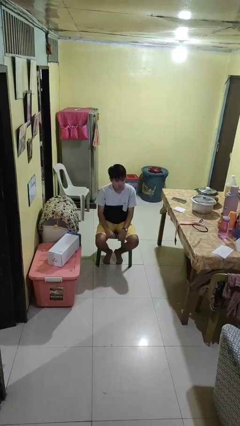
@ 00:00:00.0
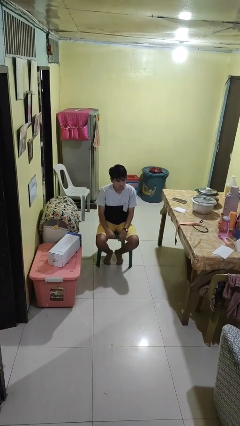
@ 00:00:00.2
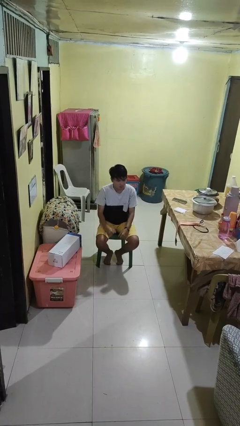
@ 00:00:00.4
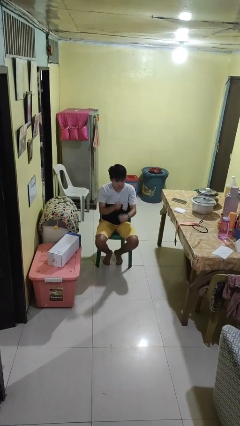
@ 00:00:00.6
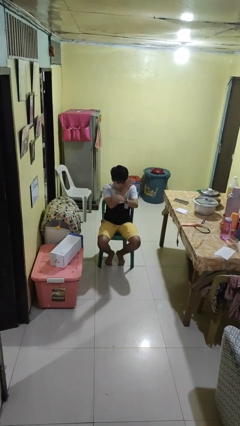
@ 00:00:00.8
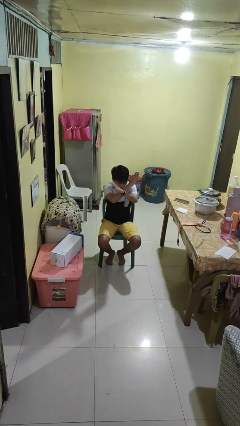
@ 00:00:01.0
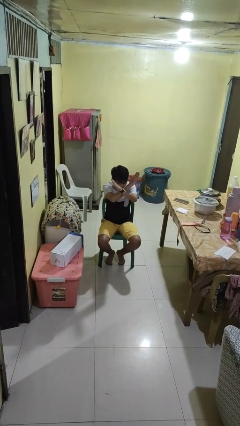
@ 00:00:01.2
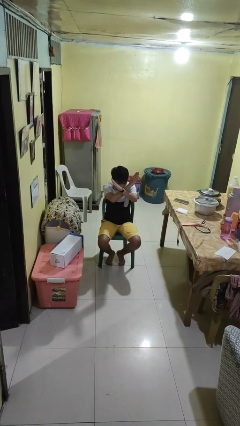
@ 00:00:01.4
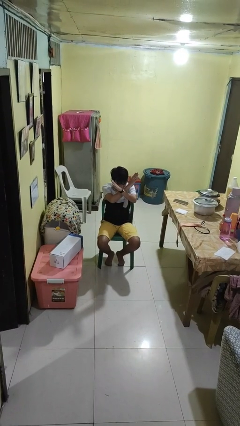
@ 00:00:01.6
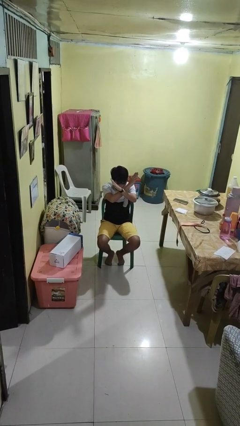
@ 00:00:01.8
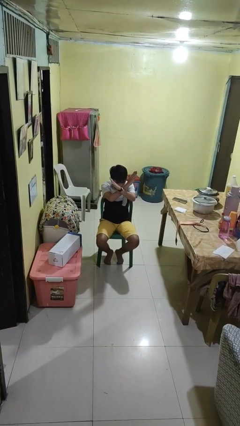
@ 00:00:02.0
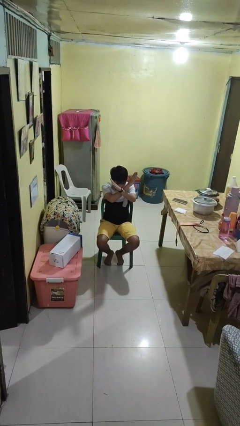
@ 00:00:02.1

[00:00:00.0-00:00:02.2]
person gestures arms x

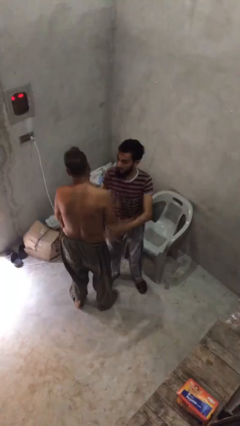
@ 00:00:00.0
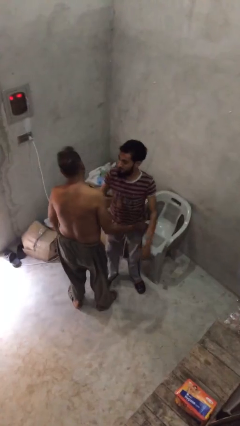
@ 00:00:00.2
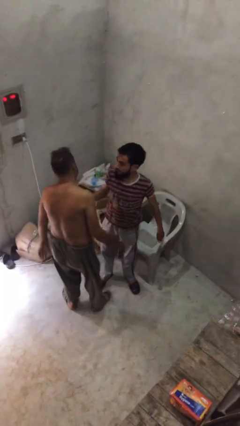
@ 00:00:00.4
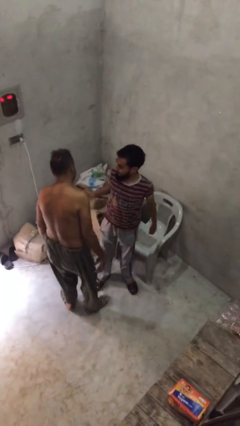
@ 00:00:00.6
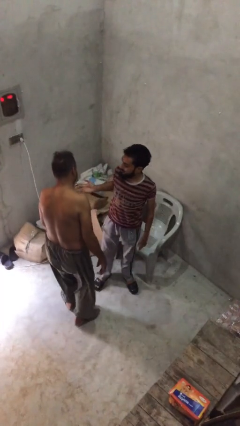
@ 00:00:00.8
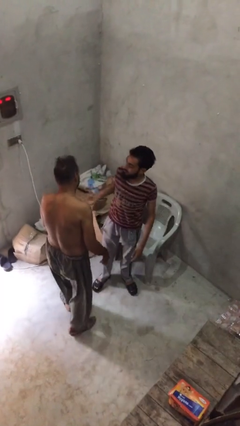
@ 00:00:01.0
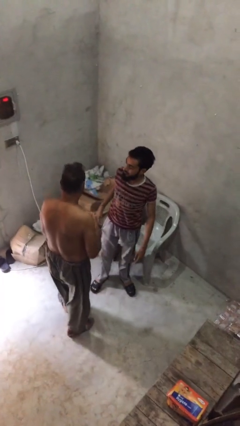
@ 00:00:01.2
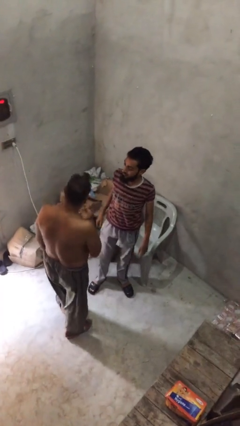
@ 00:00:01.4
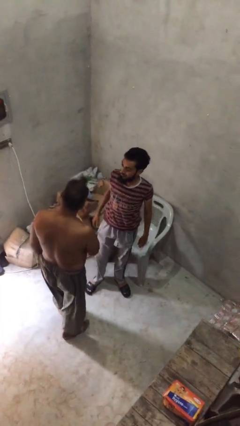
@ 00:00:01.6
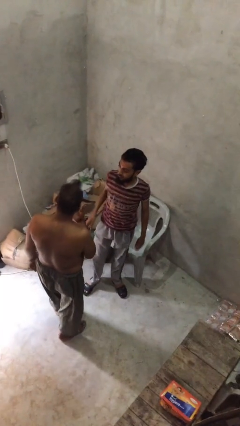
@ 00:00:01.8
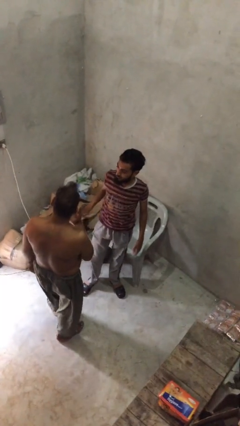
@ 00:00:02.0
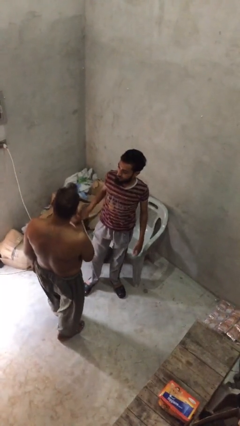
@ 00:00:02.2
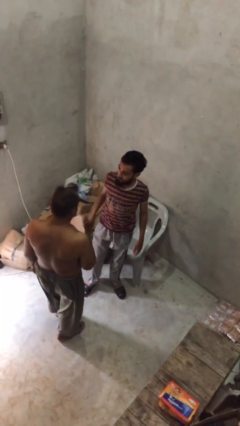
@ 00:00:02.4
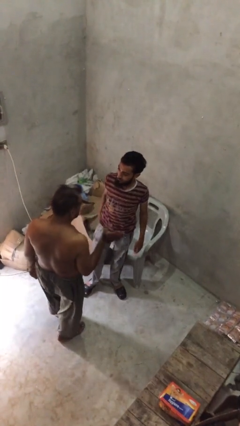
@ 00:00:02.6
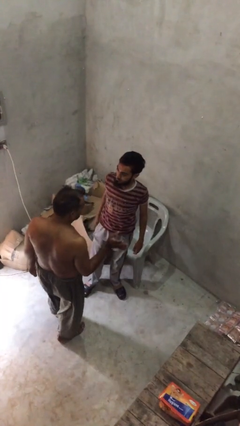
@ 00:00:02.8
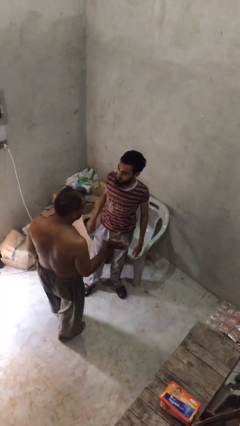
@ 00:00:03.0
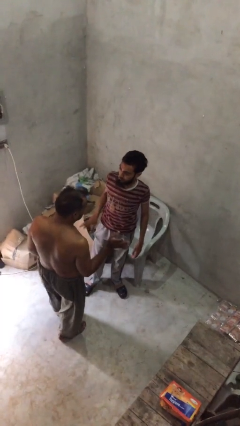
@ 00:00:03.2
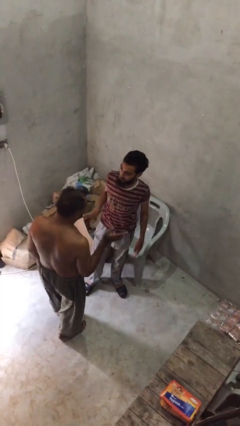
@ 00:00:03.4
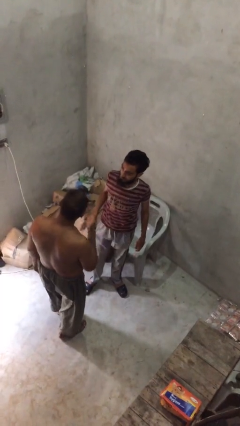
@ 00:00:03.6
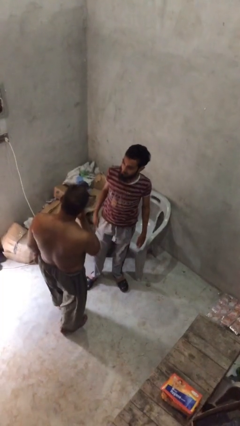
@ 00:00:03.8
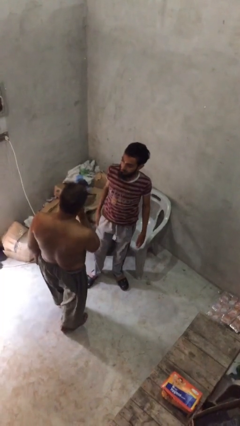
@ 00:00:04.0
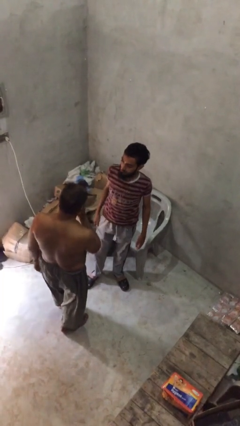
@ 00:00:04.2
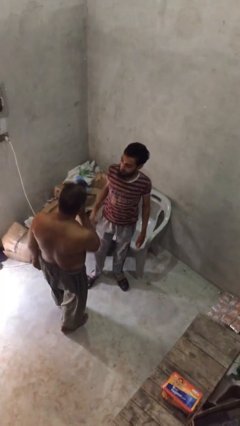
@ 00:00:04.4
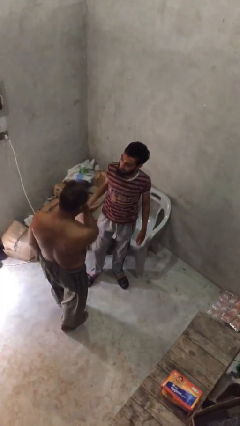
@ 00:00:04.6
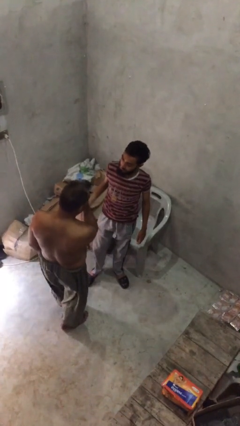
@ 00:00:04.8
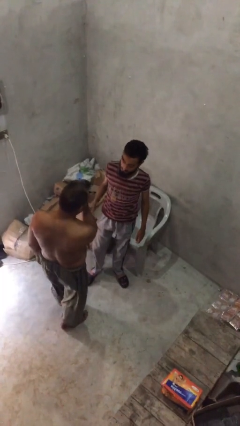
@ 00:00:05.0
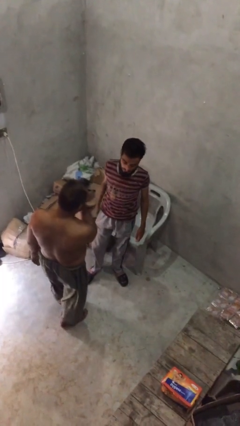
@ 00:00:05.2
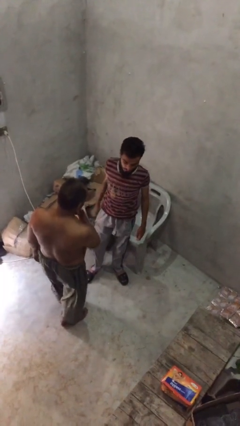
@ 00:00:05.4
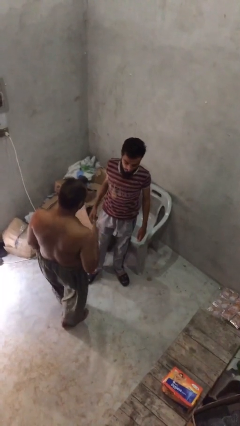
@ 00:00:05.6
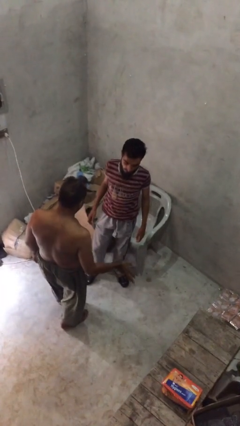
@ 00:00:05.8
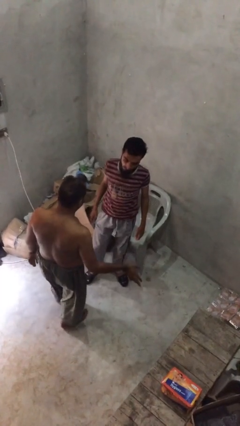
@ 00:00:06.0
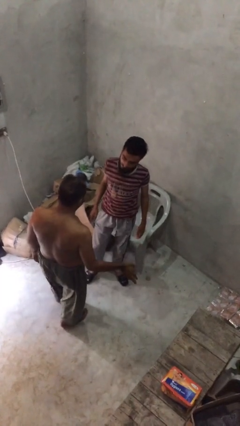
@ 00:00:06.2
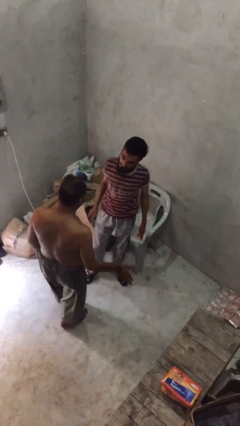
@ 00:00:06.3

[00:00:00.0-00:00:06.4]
person talks to person

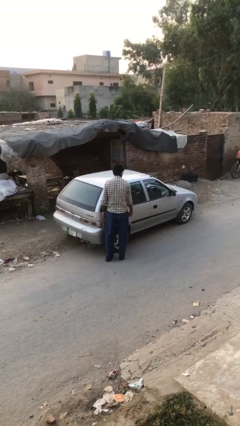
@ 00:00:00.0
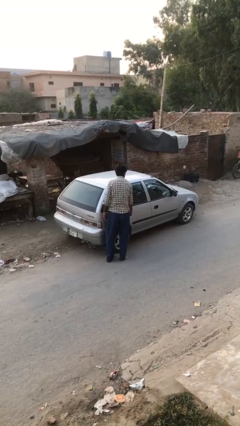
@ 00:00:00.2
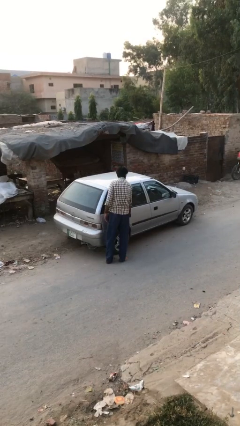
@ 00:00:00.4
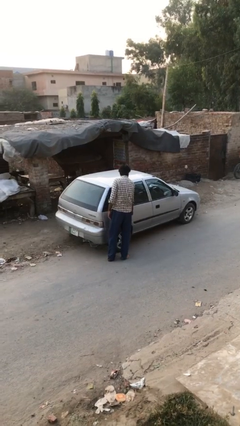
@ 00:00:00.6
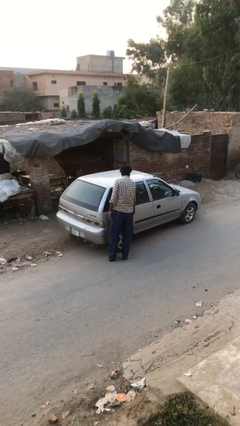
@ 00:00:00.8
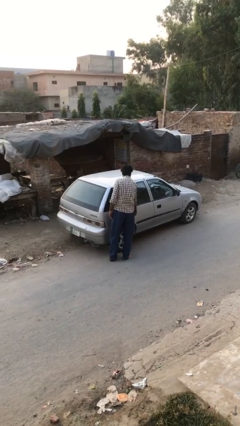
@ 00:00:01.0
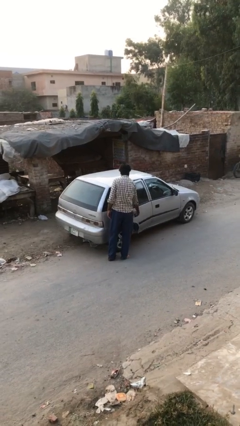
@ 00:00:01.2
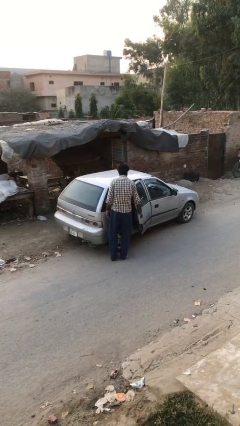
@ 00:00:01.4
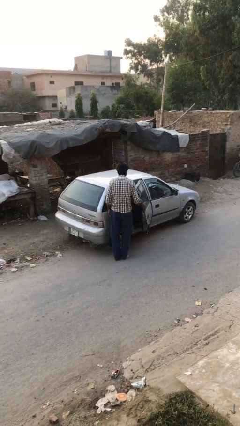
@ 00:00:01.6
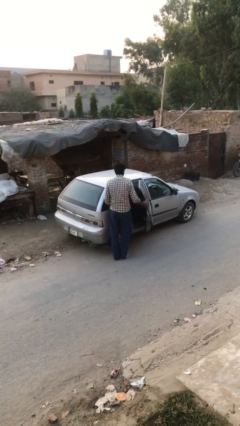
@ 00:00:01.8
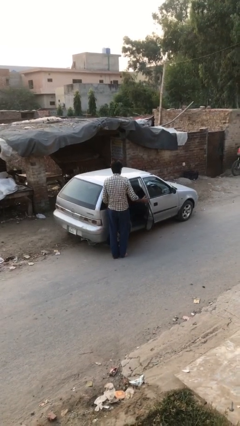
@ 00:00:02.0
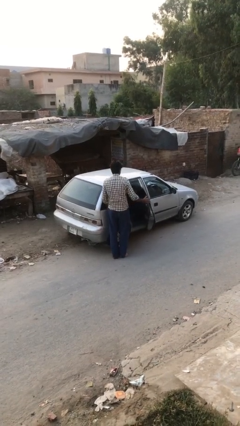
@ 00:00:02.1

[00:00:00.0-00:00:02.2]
person opens car door

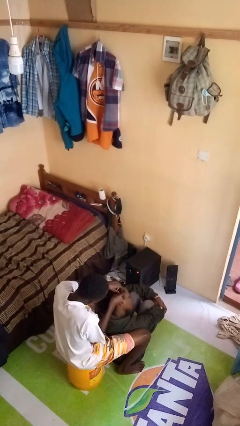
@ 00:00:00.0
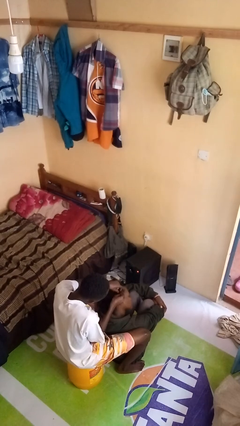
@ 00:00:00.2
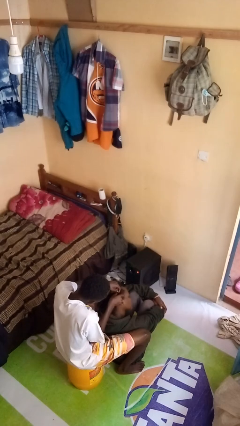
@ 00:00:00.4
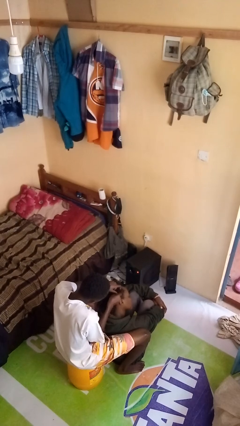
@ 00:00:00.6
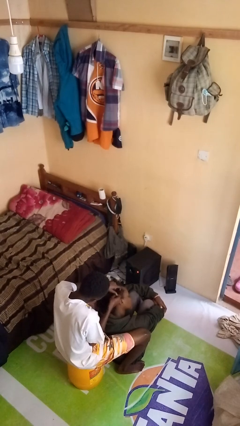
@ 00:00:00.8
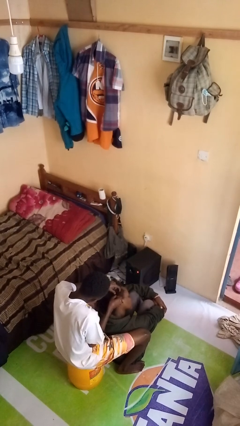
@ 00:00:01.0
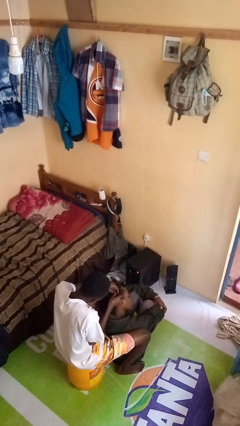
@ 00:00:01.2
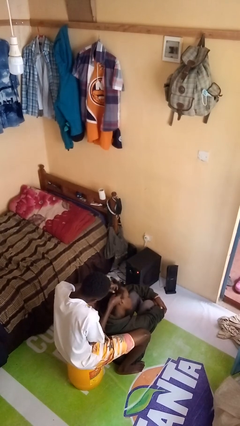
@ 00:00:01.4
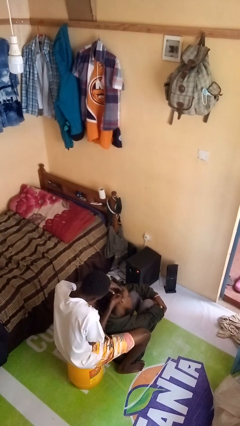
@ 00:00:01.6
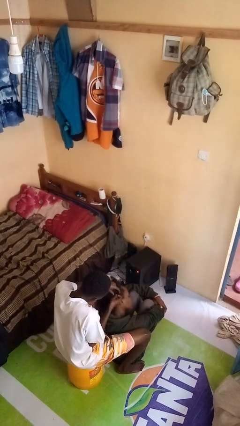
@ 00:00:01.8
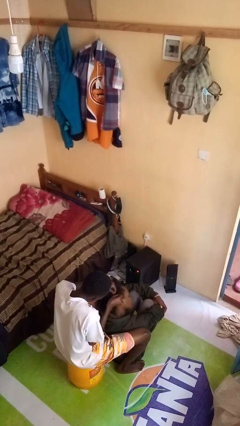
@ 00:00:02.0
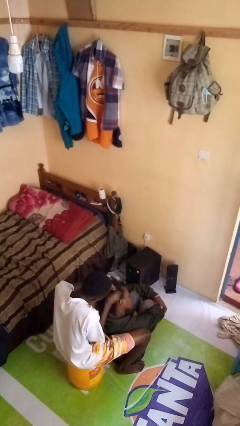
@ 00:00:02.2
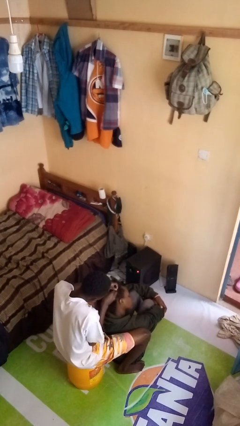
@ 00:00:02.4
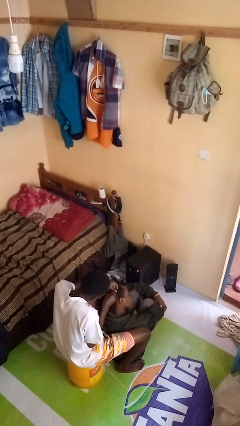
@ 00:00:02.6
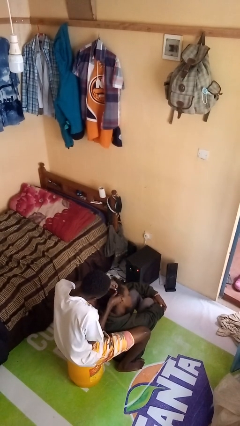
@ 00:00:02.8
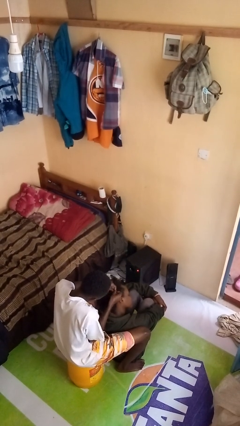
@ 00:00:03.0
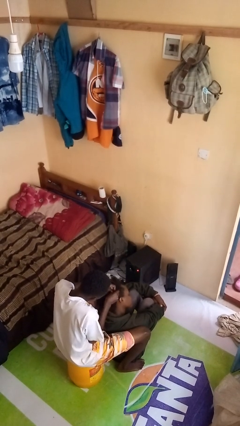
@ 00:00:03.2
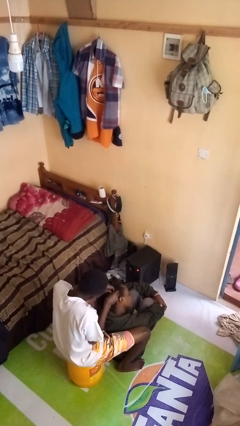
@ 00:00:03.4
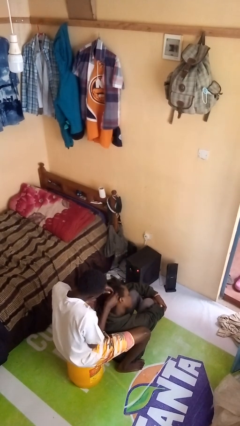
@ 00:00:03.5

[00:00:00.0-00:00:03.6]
person braids hair of person

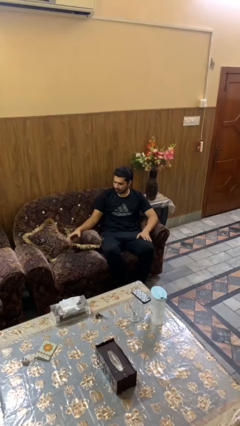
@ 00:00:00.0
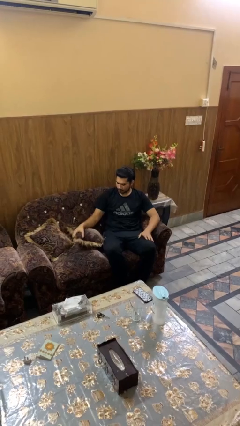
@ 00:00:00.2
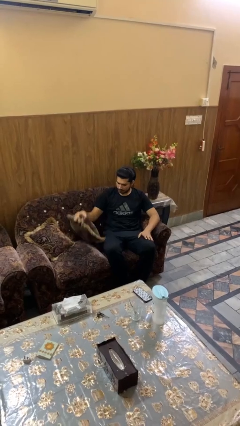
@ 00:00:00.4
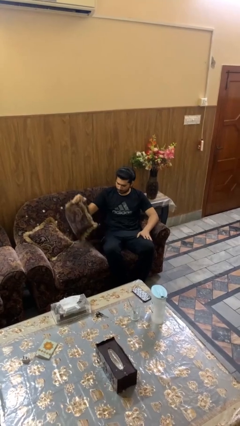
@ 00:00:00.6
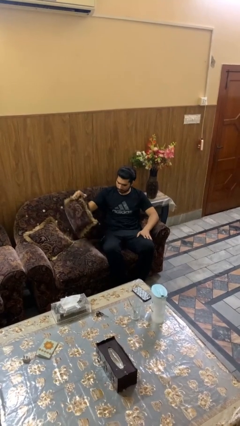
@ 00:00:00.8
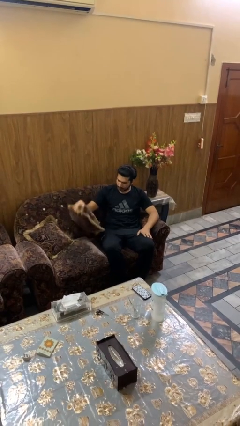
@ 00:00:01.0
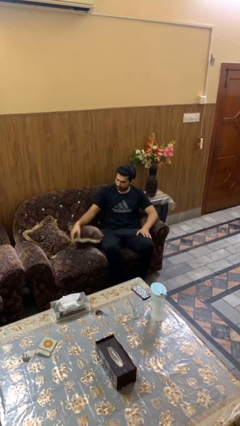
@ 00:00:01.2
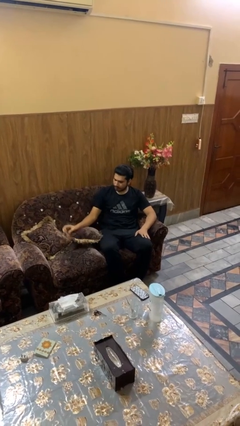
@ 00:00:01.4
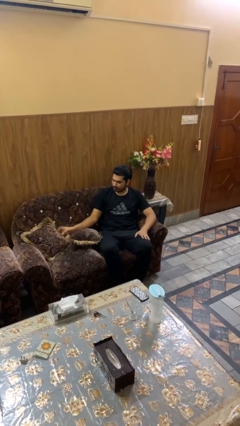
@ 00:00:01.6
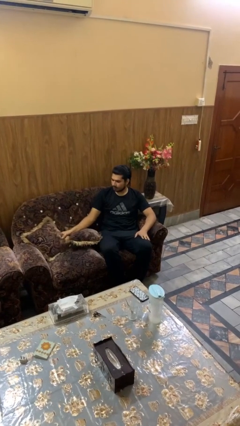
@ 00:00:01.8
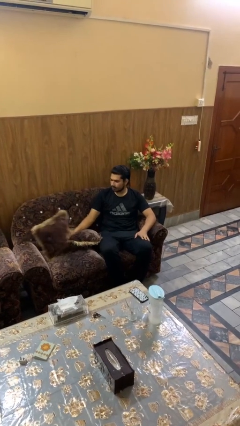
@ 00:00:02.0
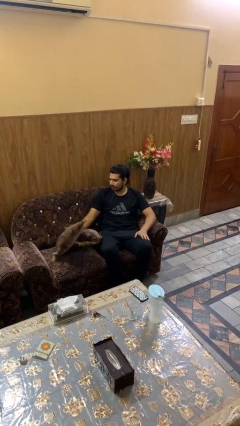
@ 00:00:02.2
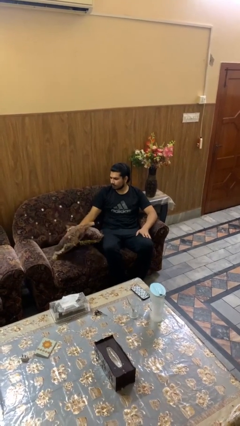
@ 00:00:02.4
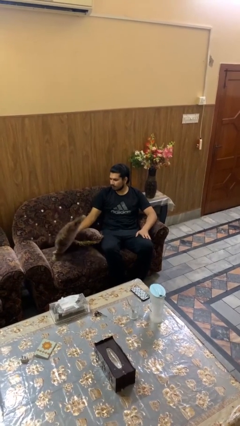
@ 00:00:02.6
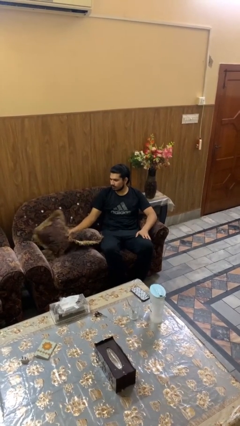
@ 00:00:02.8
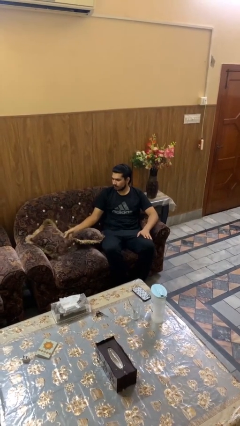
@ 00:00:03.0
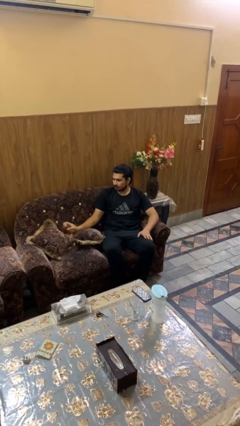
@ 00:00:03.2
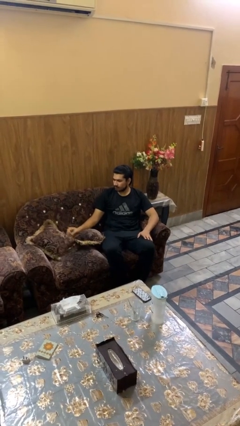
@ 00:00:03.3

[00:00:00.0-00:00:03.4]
person searches in couch
